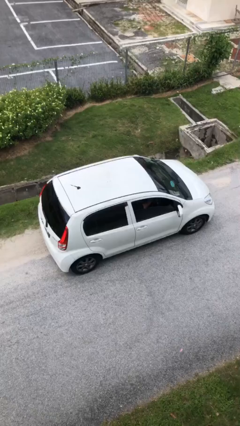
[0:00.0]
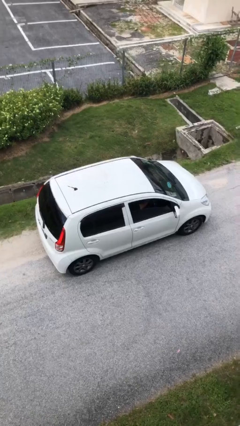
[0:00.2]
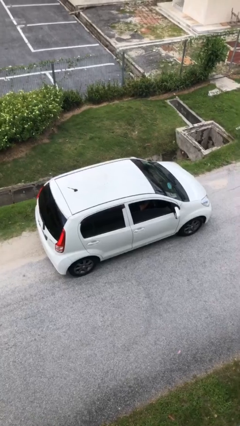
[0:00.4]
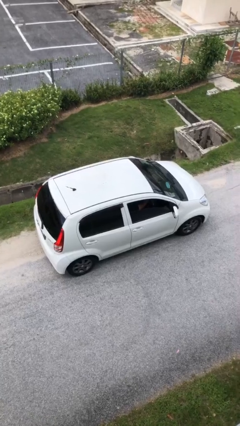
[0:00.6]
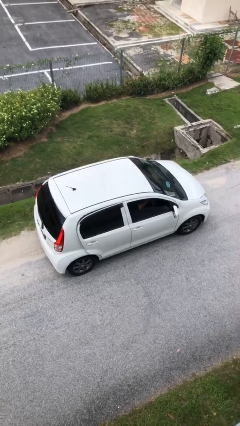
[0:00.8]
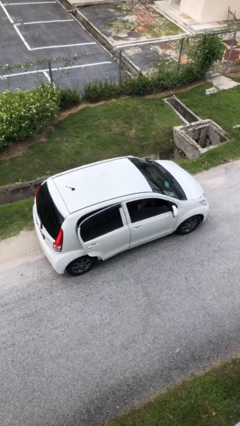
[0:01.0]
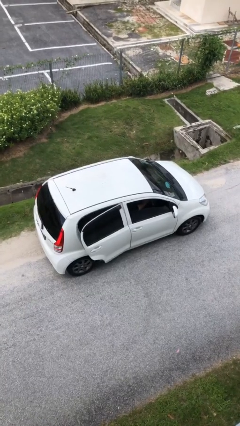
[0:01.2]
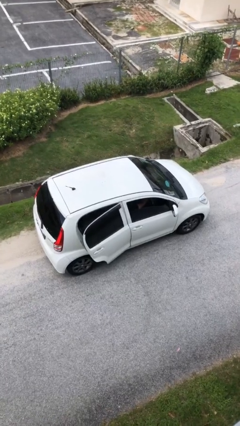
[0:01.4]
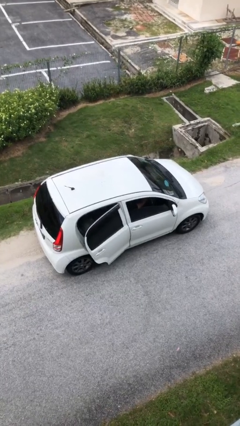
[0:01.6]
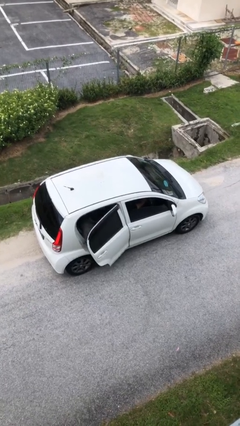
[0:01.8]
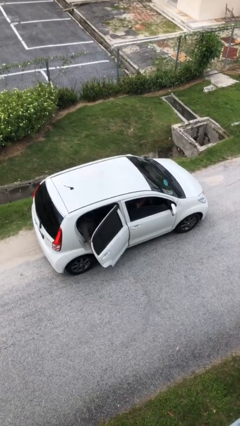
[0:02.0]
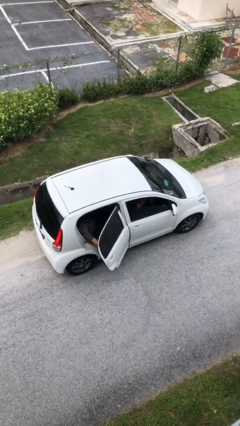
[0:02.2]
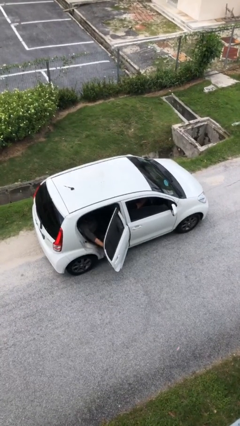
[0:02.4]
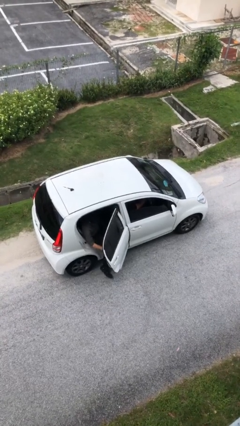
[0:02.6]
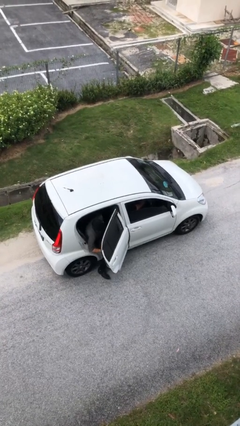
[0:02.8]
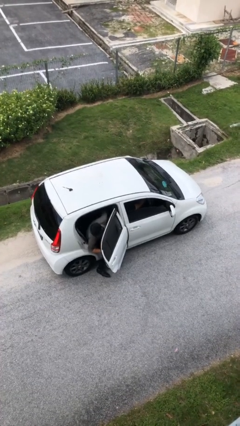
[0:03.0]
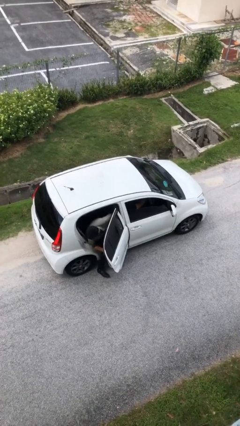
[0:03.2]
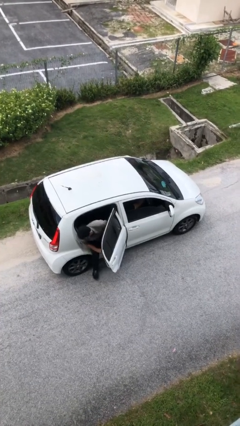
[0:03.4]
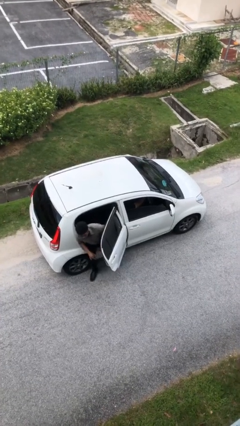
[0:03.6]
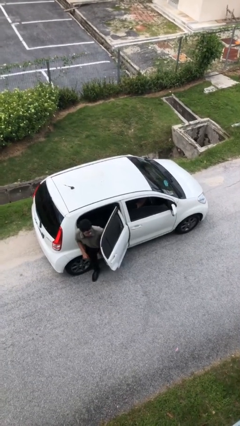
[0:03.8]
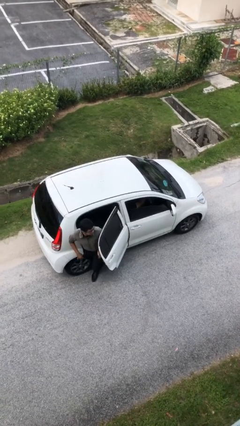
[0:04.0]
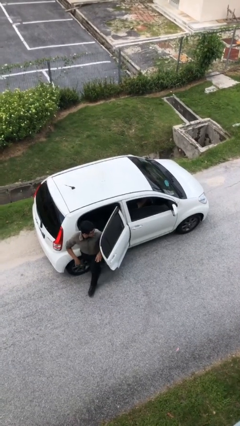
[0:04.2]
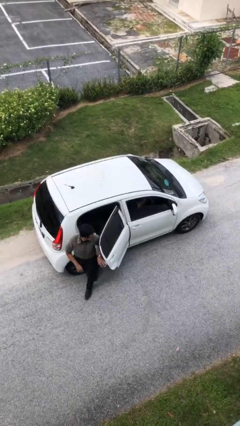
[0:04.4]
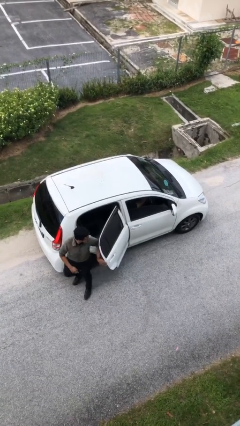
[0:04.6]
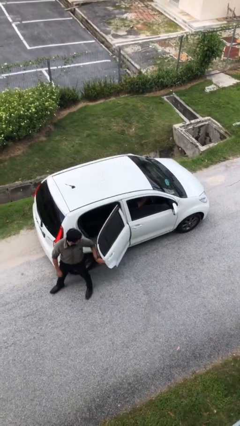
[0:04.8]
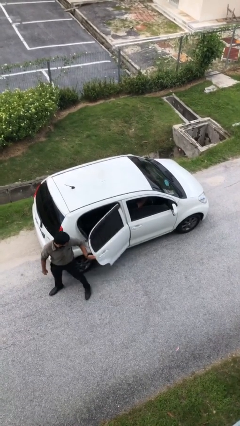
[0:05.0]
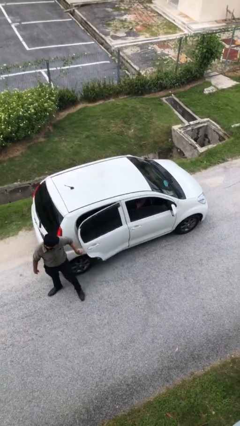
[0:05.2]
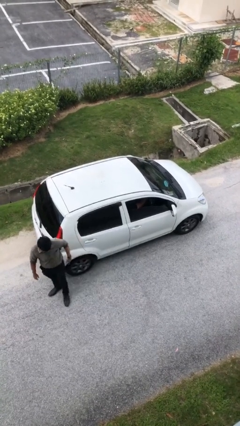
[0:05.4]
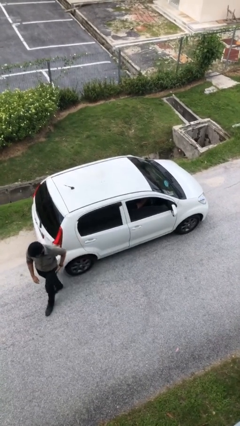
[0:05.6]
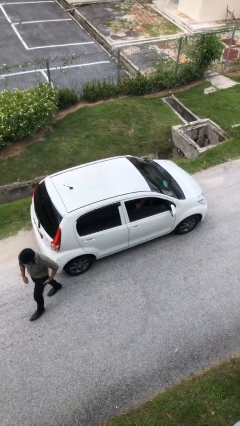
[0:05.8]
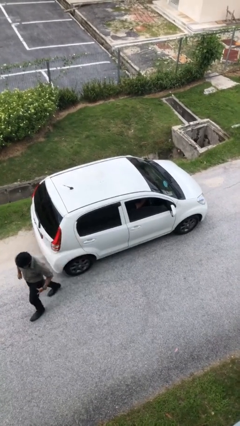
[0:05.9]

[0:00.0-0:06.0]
car drops off person

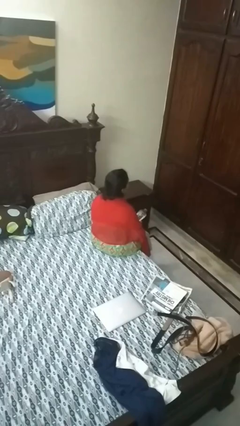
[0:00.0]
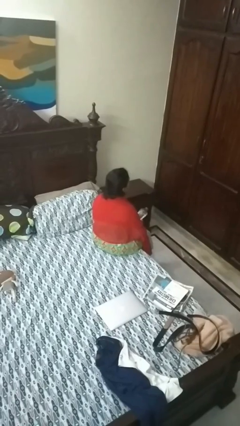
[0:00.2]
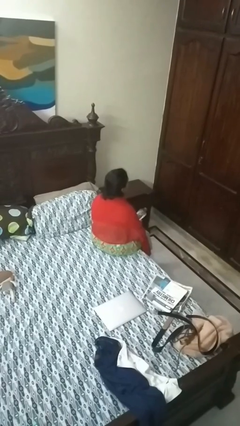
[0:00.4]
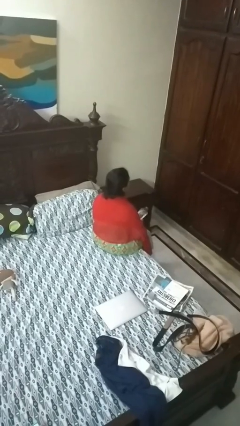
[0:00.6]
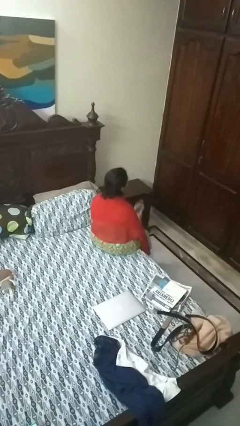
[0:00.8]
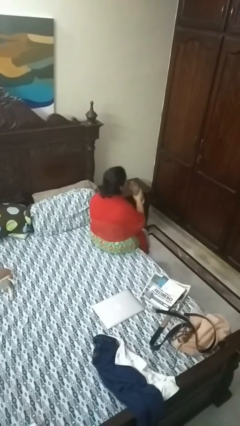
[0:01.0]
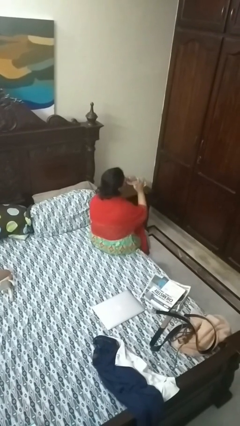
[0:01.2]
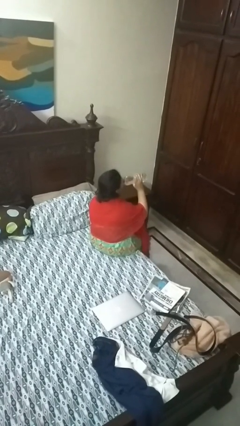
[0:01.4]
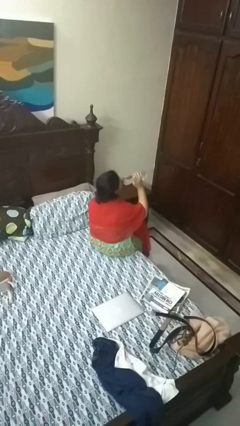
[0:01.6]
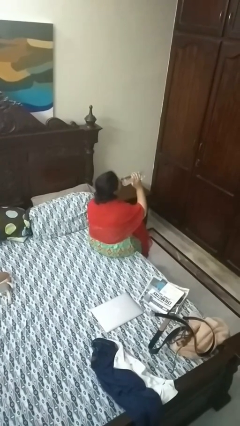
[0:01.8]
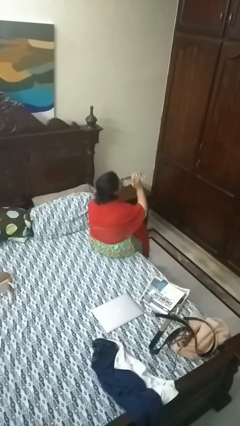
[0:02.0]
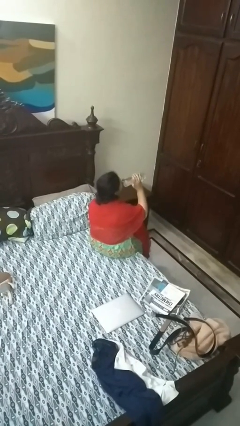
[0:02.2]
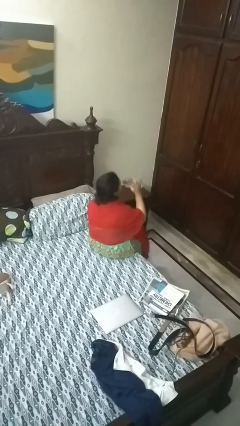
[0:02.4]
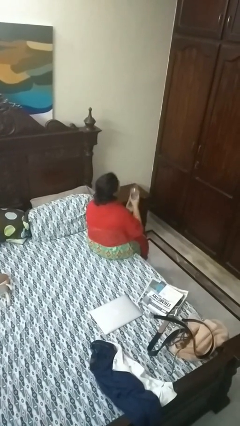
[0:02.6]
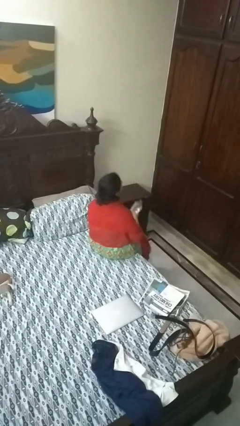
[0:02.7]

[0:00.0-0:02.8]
person drinks from bottle

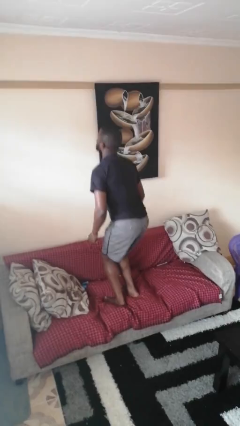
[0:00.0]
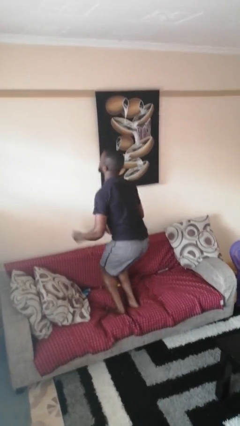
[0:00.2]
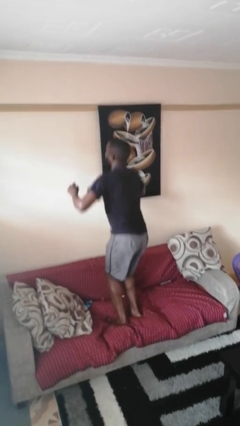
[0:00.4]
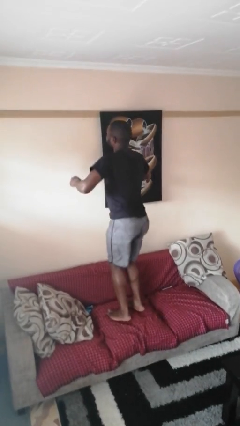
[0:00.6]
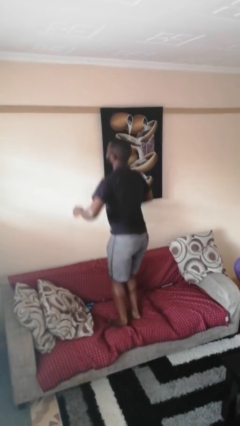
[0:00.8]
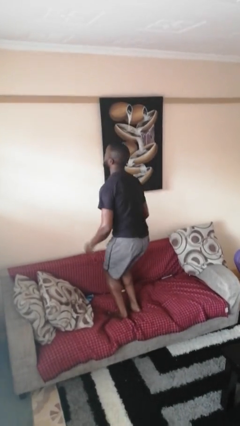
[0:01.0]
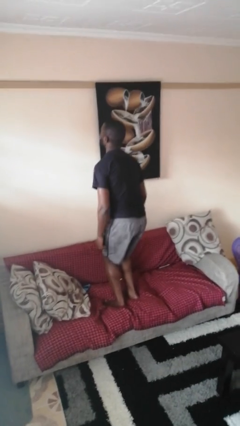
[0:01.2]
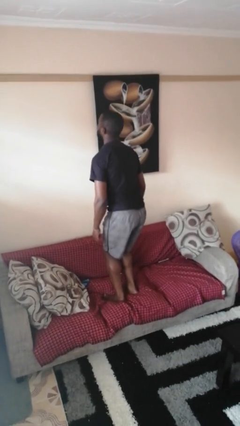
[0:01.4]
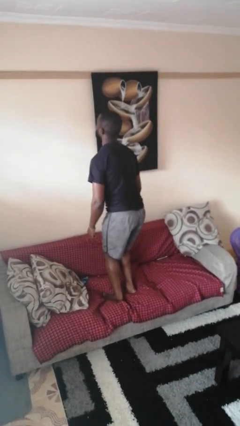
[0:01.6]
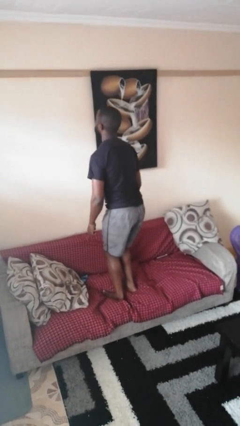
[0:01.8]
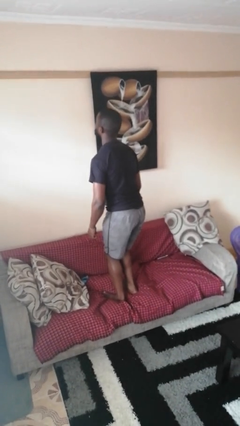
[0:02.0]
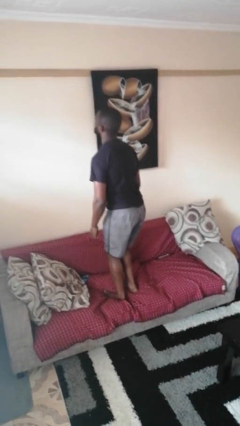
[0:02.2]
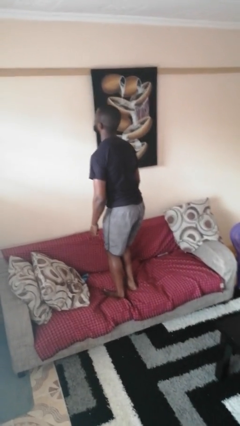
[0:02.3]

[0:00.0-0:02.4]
person jumps on couch

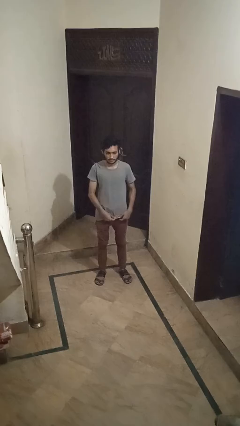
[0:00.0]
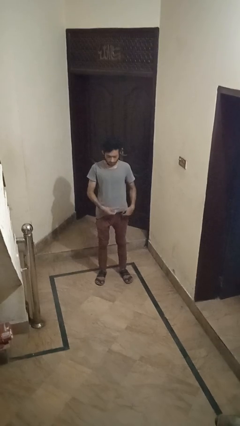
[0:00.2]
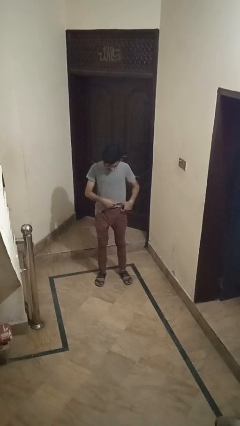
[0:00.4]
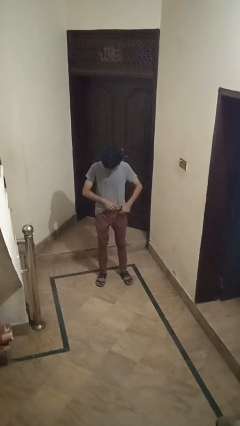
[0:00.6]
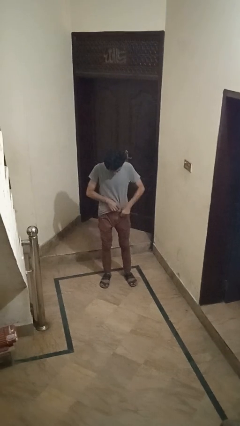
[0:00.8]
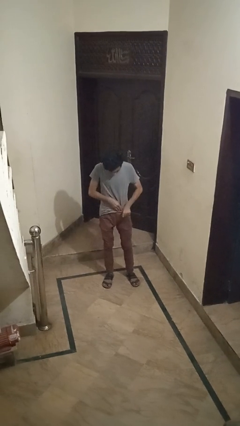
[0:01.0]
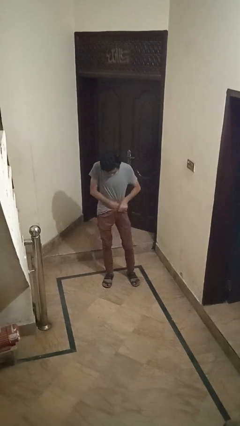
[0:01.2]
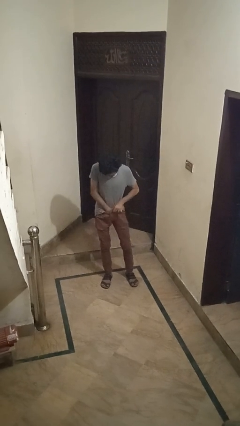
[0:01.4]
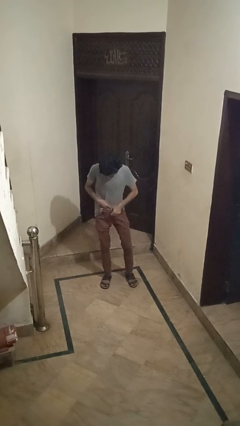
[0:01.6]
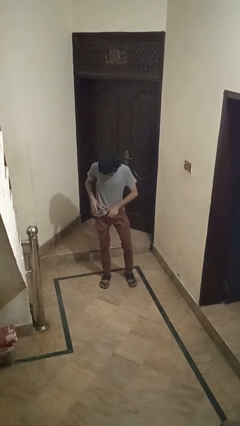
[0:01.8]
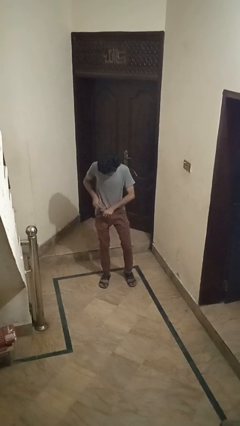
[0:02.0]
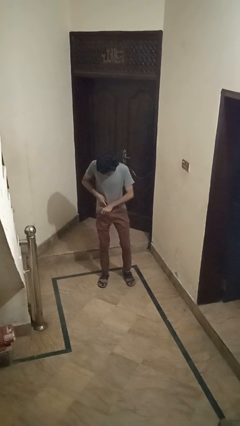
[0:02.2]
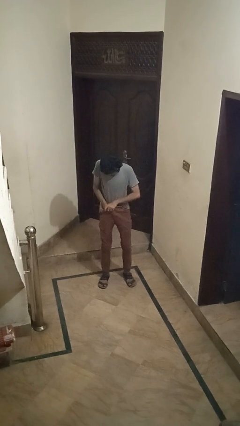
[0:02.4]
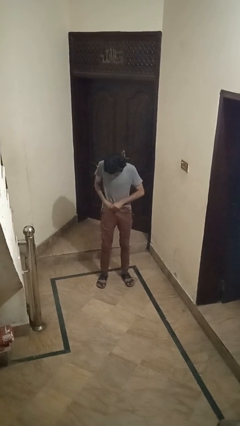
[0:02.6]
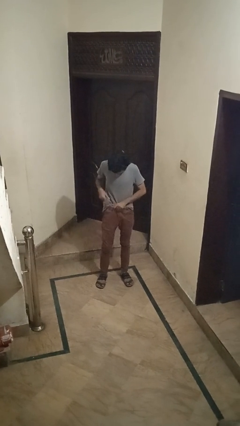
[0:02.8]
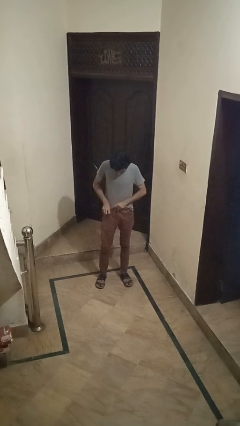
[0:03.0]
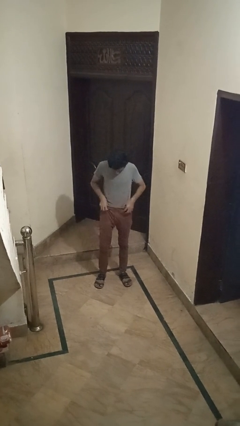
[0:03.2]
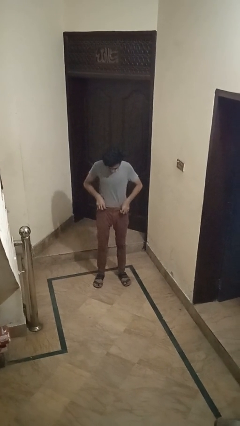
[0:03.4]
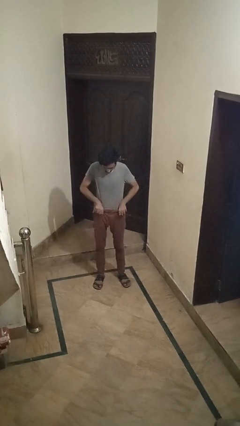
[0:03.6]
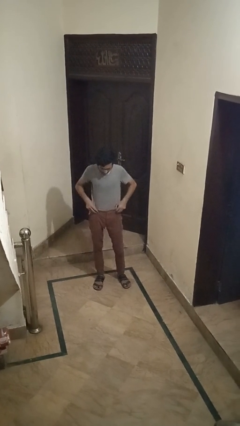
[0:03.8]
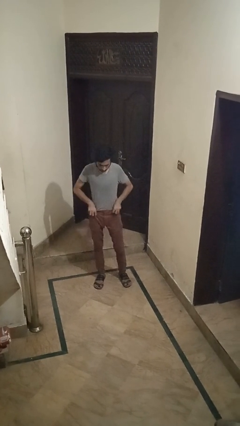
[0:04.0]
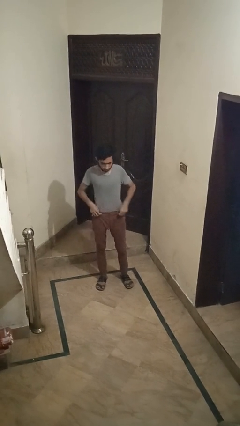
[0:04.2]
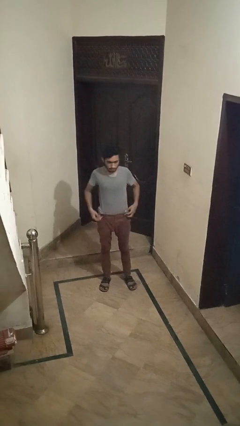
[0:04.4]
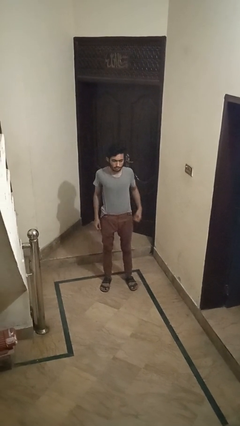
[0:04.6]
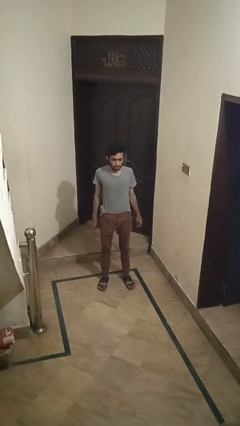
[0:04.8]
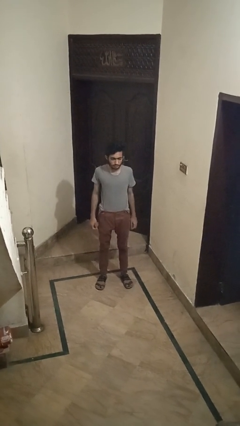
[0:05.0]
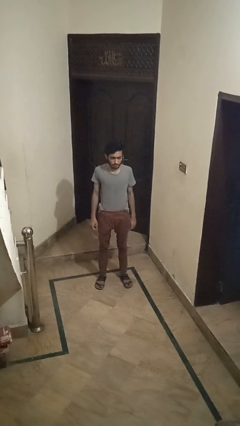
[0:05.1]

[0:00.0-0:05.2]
person tucks in shirt

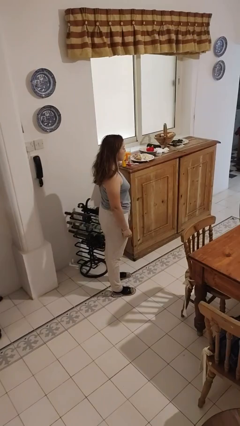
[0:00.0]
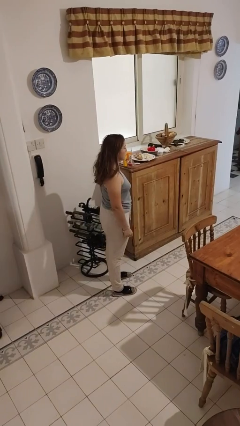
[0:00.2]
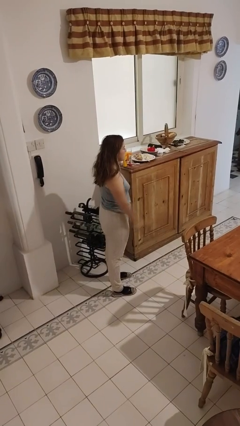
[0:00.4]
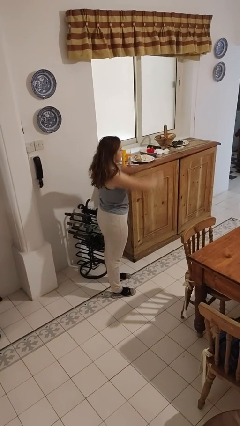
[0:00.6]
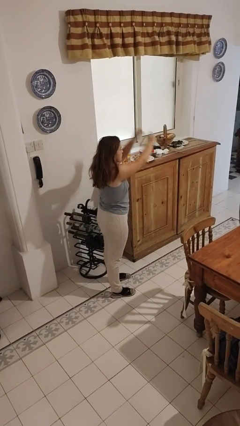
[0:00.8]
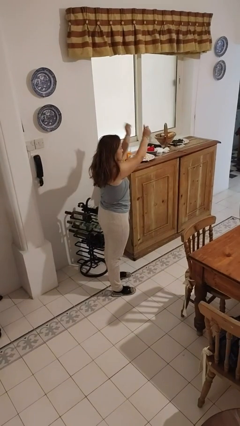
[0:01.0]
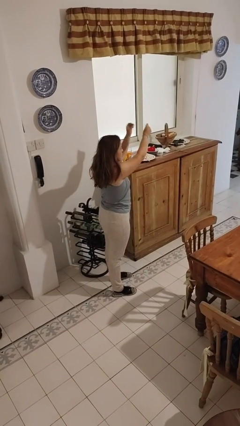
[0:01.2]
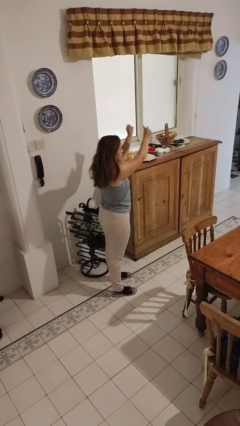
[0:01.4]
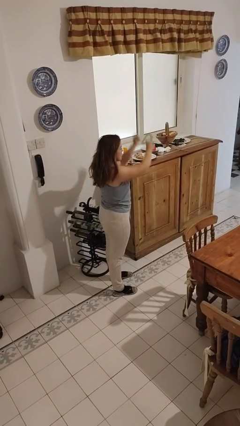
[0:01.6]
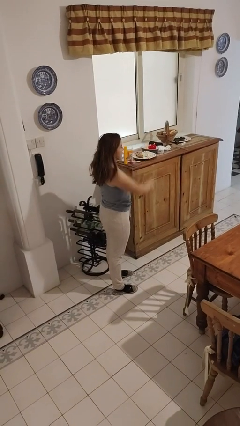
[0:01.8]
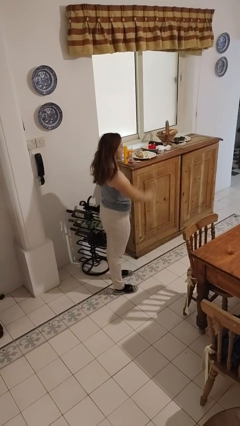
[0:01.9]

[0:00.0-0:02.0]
person snaps fingers
